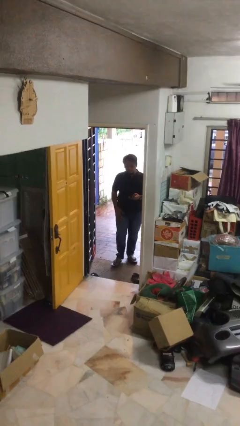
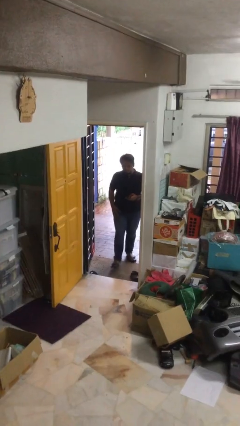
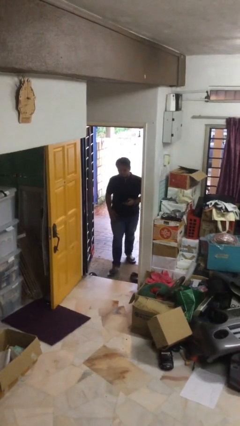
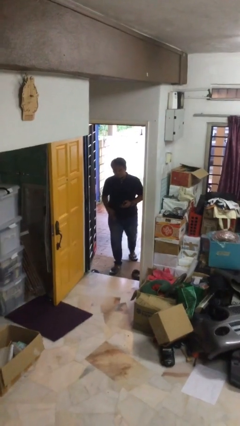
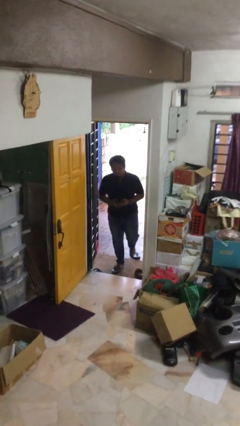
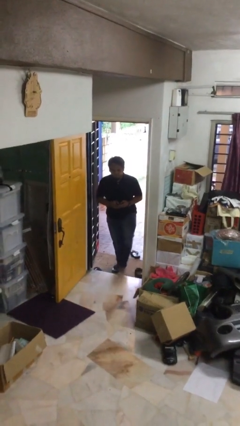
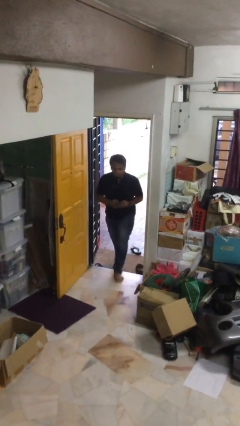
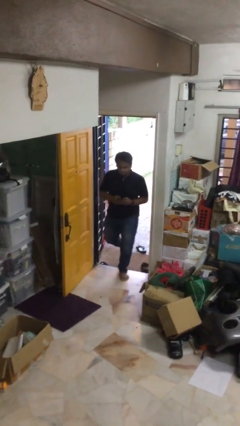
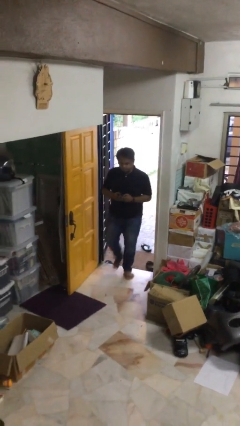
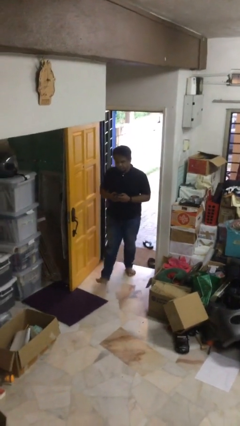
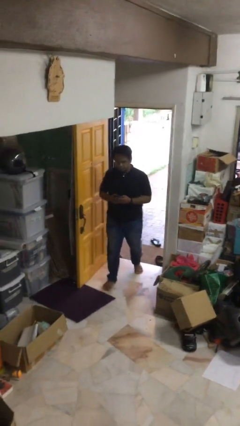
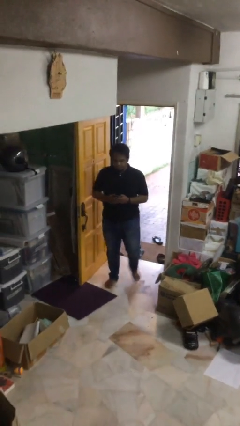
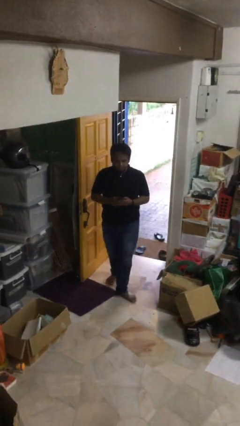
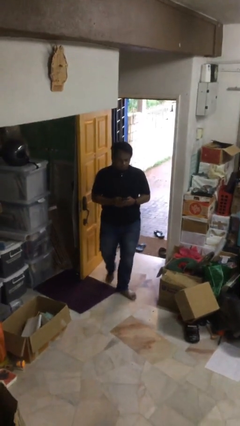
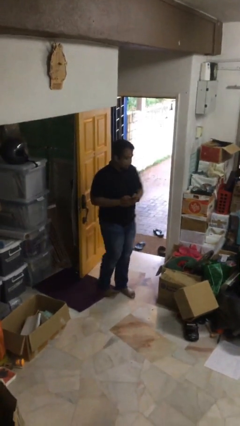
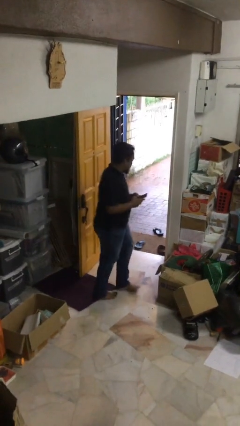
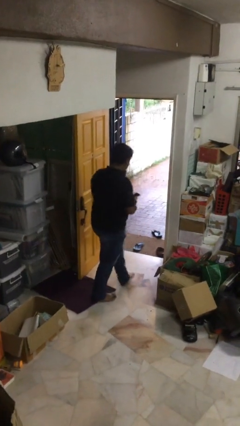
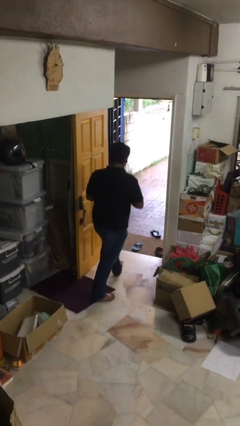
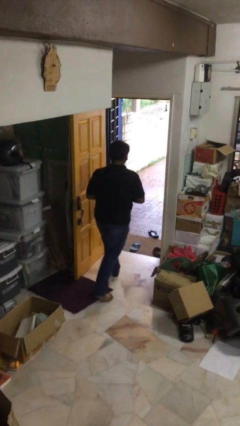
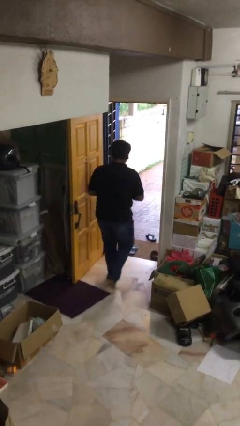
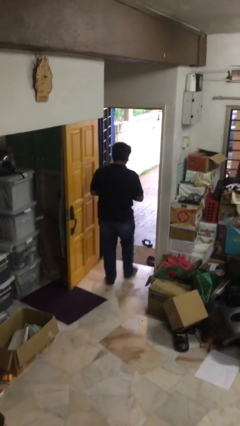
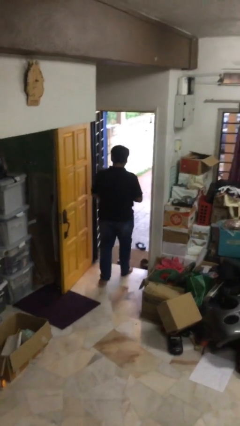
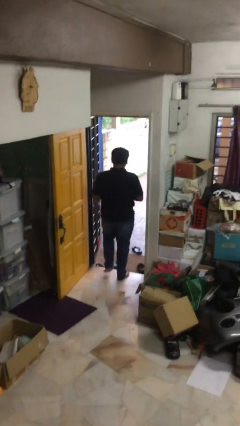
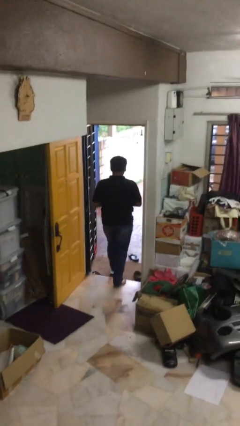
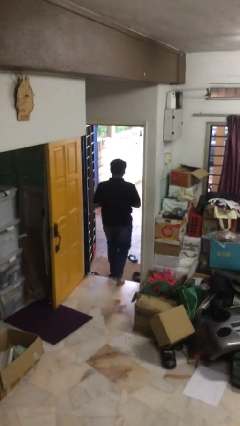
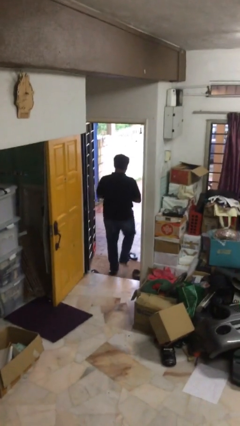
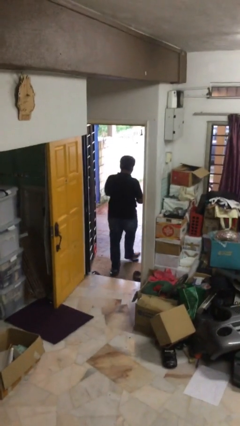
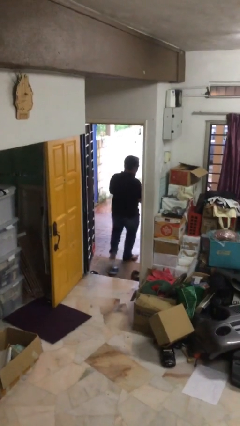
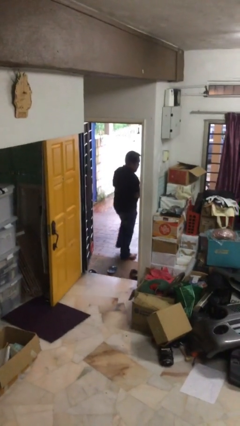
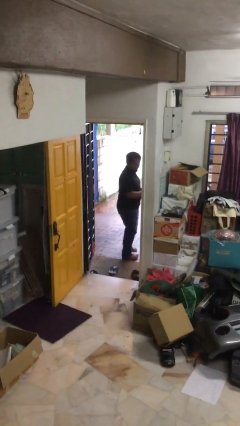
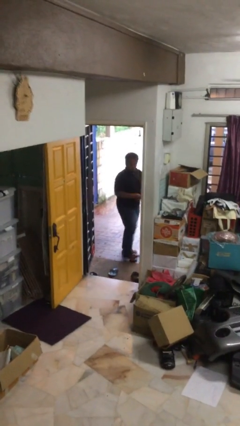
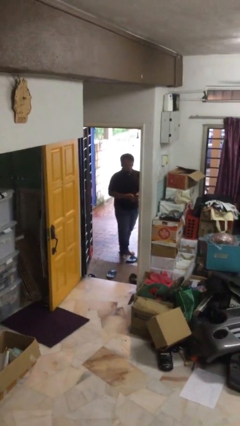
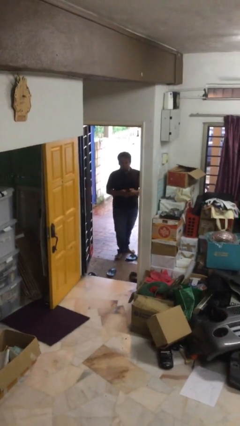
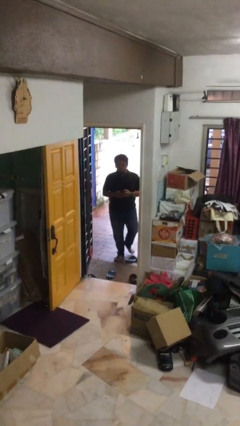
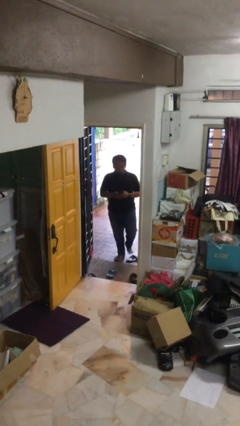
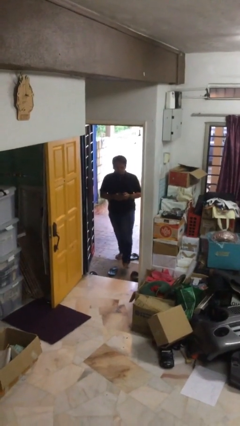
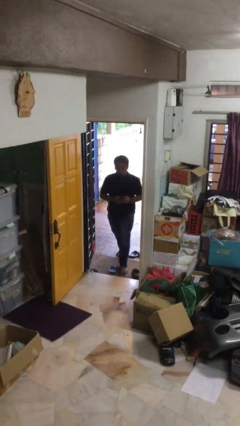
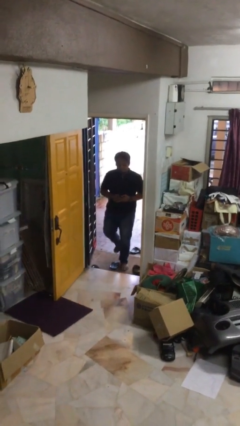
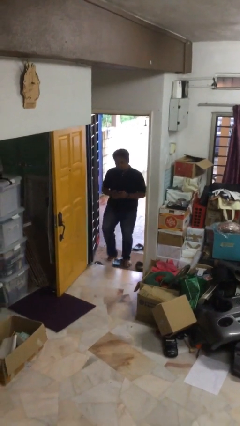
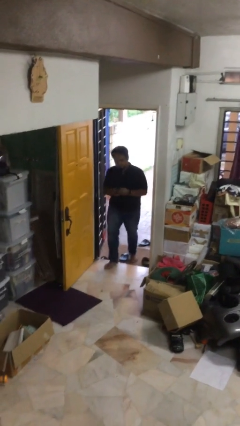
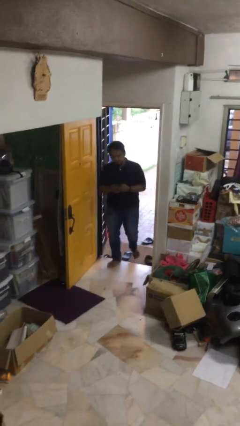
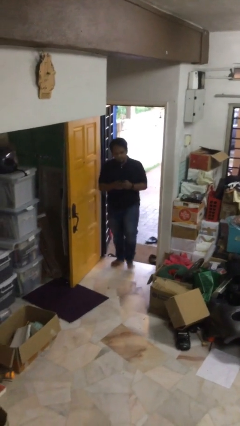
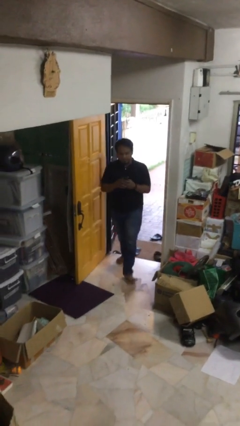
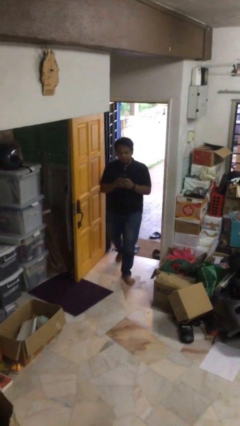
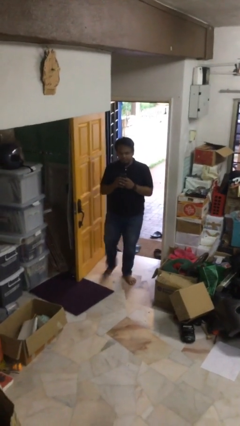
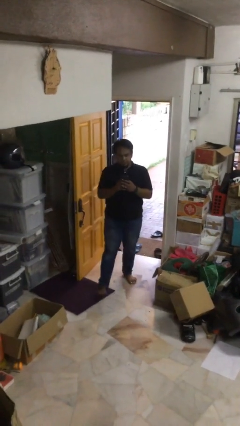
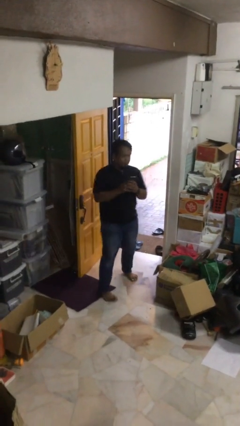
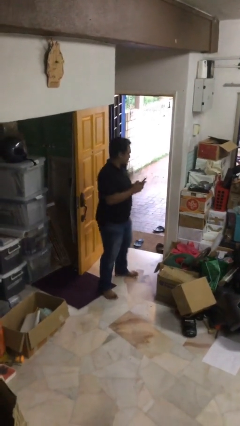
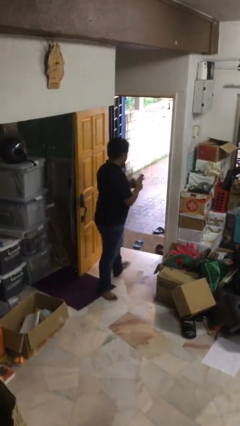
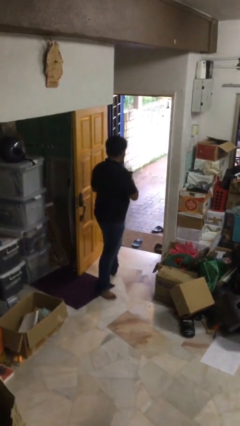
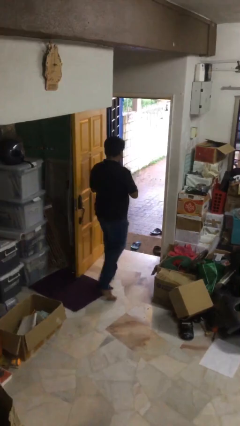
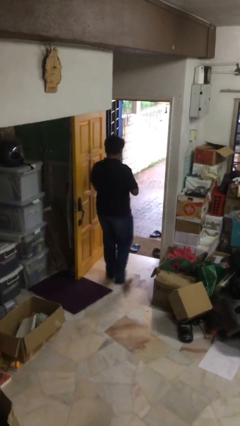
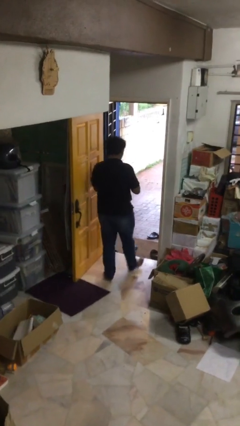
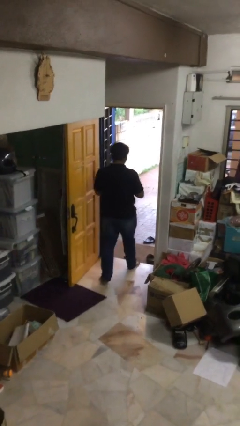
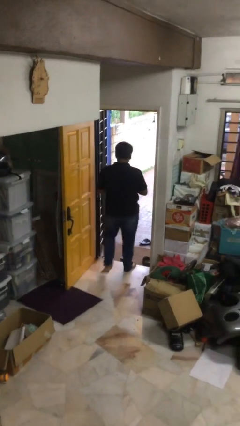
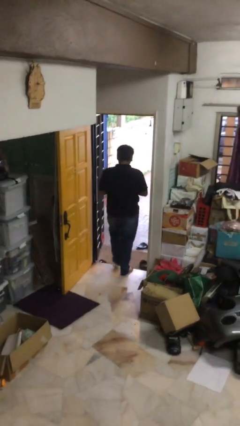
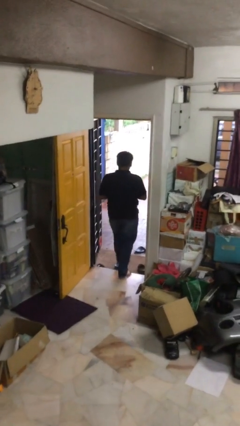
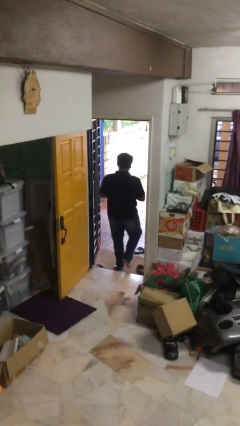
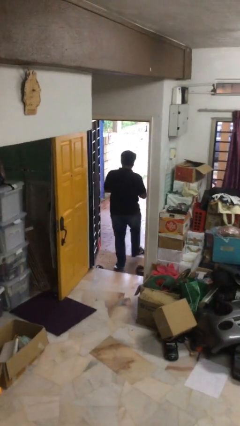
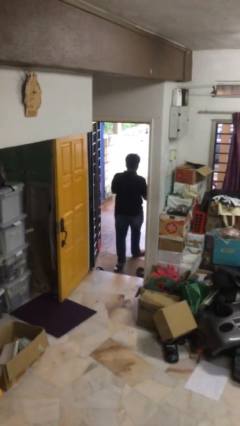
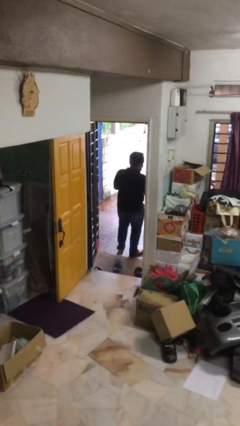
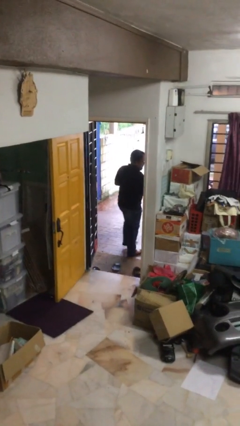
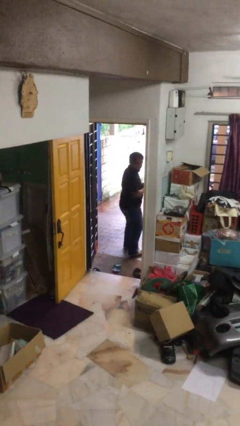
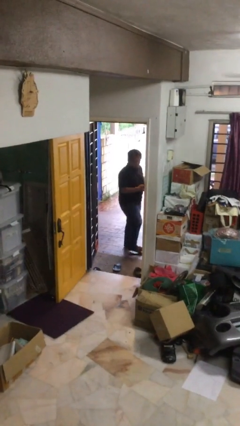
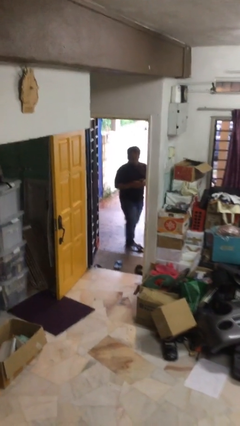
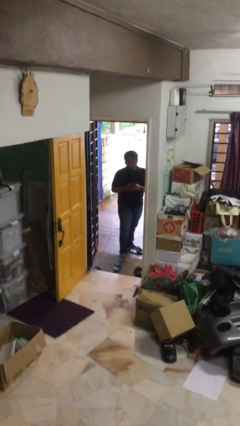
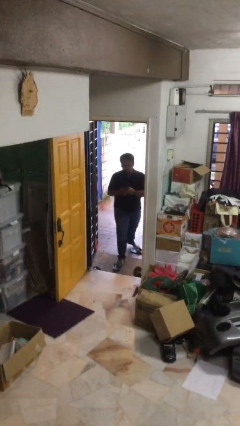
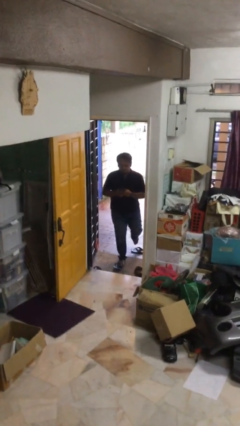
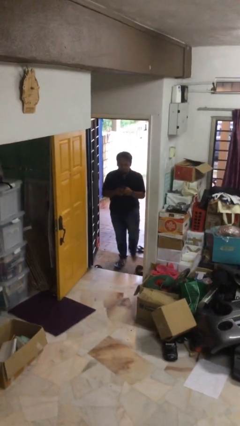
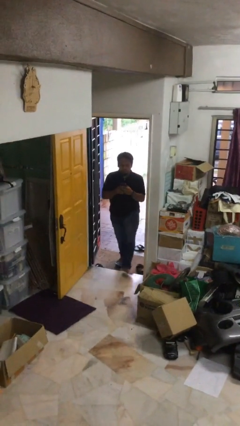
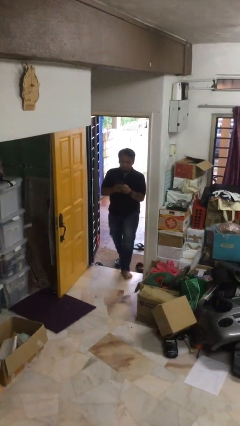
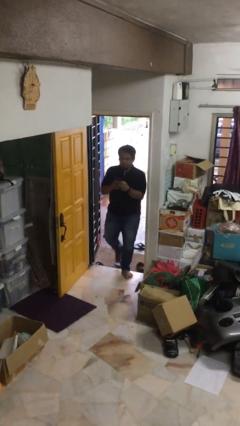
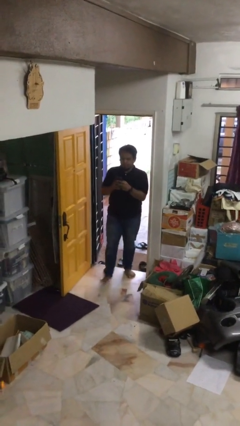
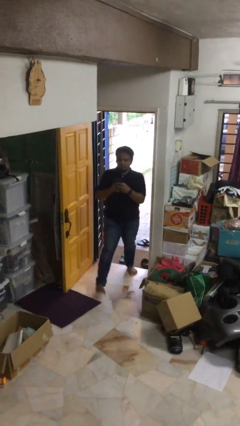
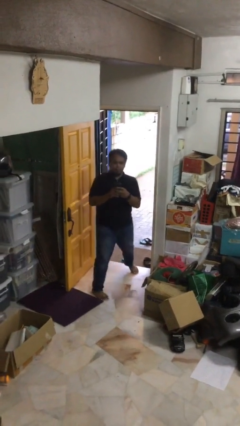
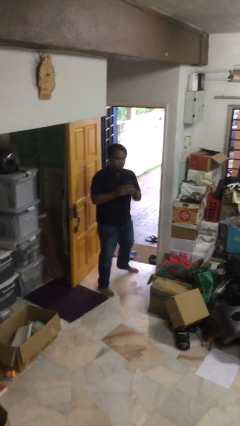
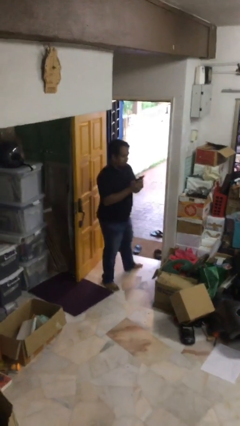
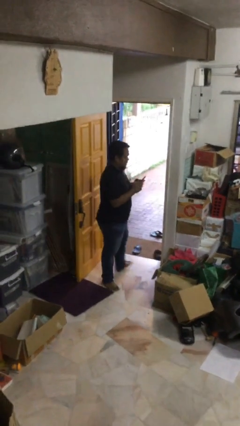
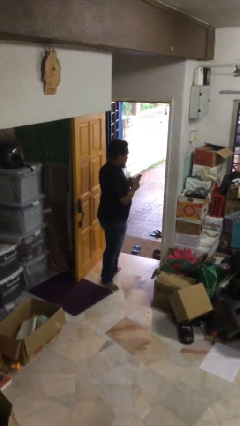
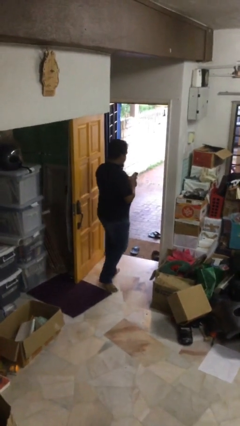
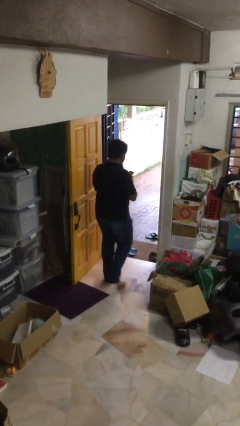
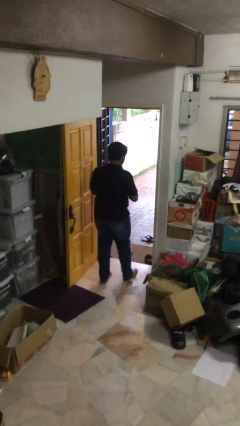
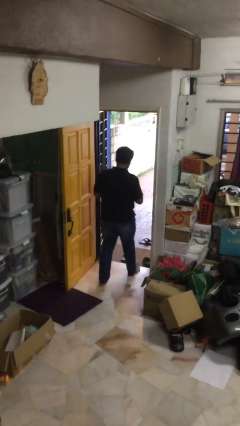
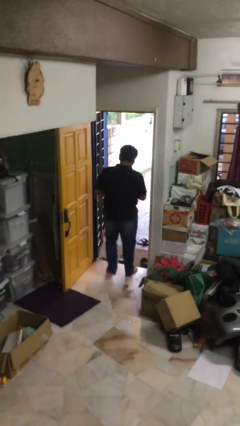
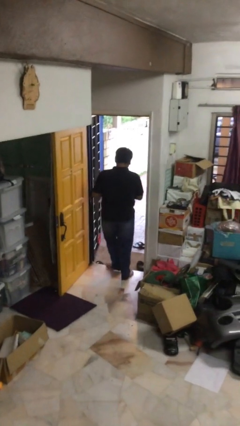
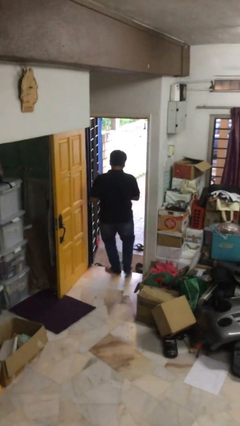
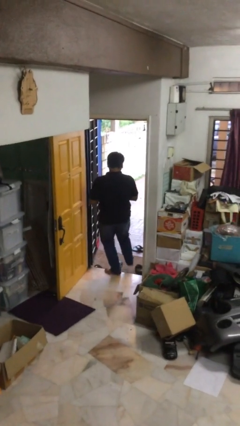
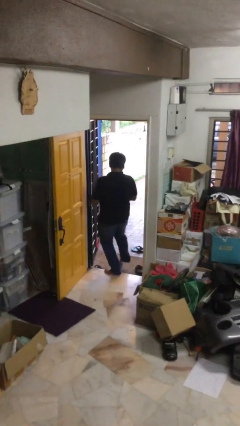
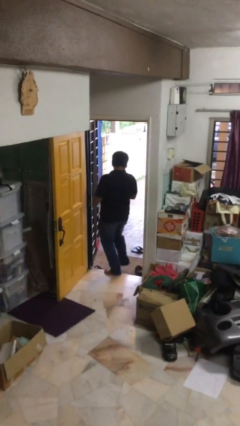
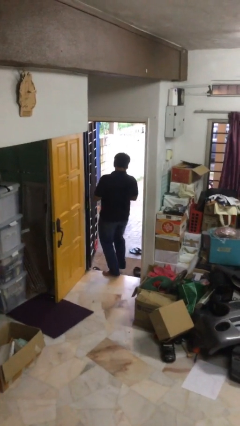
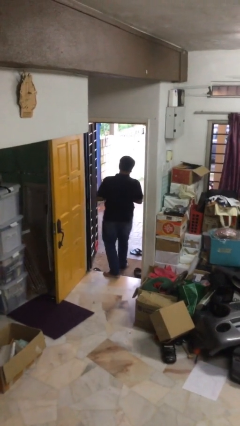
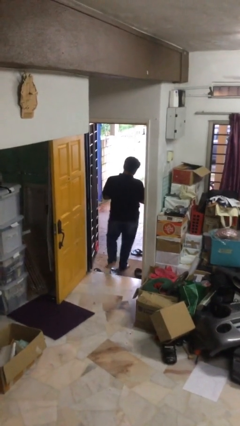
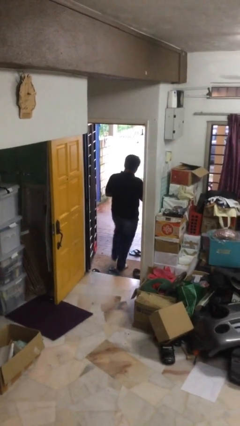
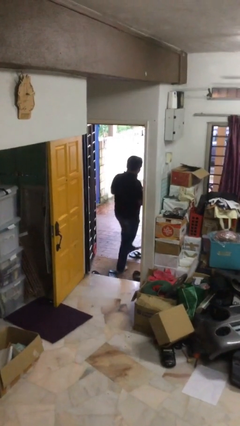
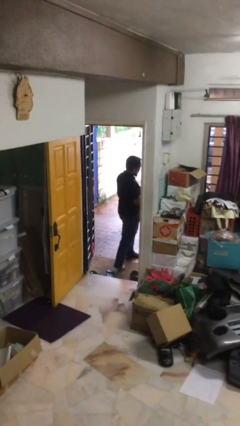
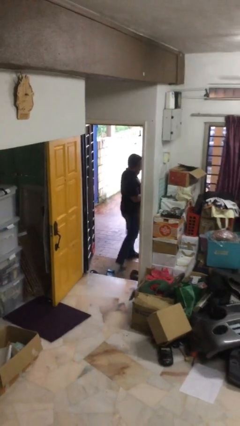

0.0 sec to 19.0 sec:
person texts on phone
